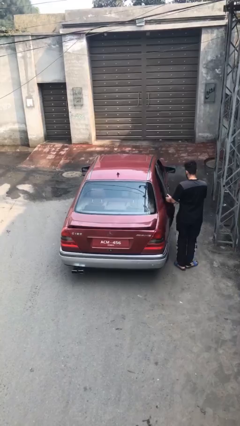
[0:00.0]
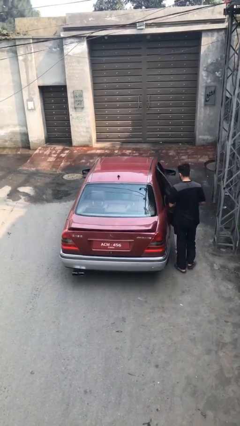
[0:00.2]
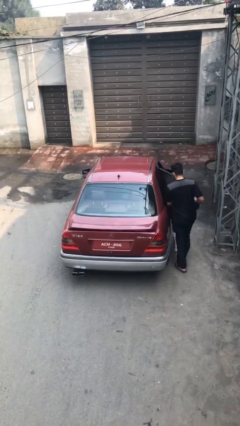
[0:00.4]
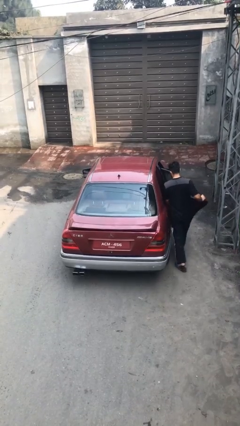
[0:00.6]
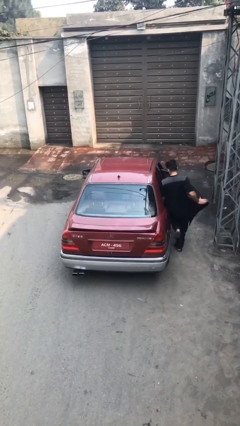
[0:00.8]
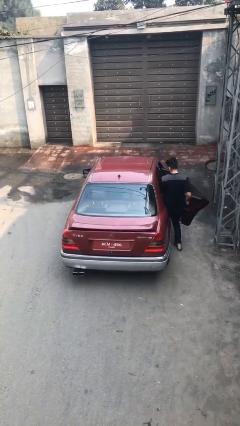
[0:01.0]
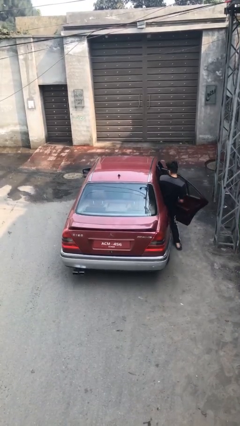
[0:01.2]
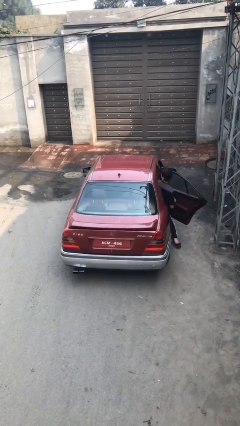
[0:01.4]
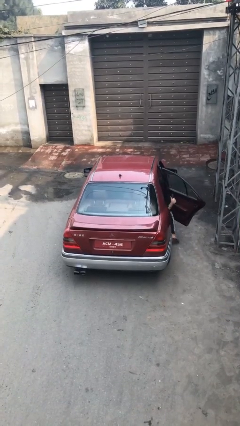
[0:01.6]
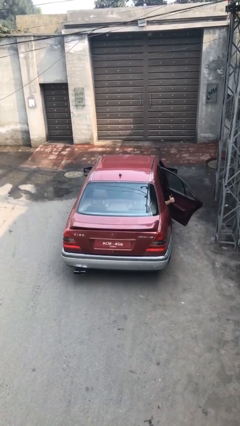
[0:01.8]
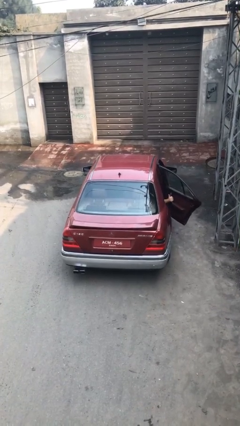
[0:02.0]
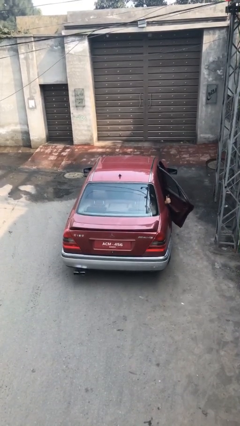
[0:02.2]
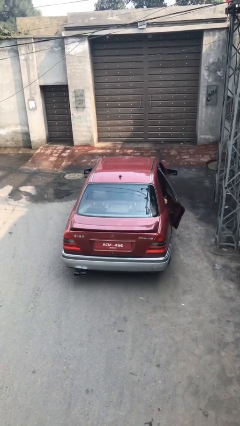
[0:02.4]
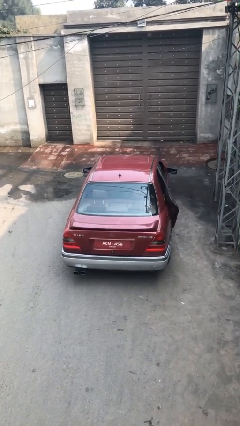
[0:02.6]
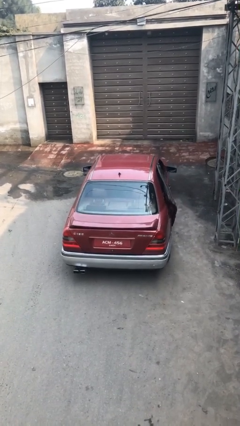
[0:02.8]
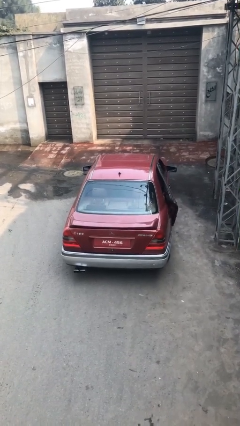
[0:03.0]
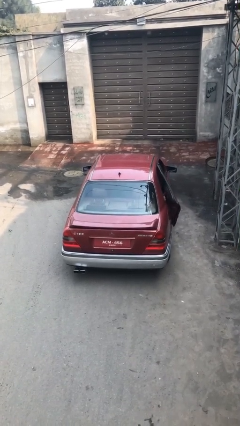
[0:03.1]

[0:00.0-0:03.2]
car picks up person

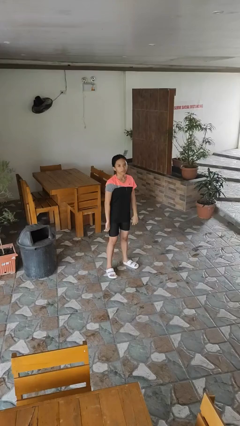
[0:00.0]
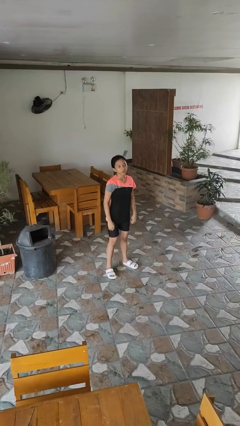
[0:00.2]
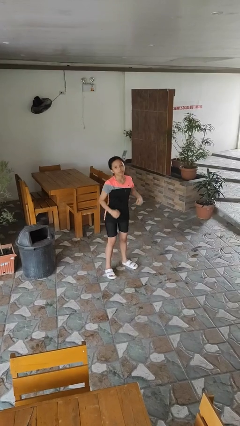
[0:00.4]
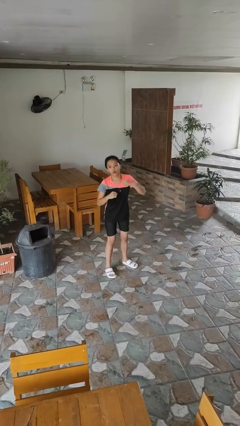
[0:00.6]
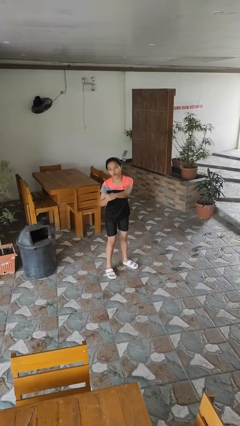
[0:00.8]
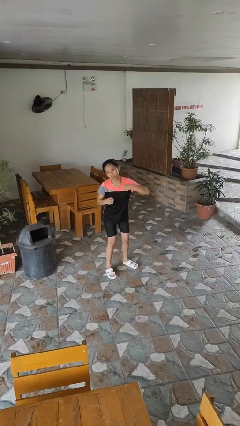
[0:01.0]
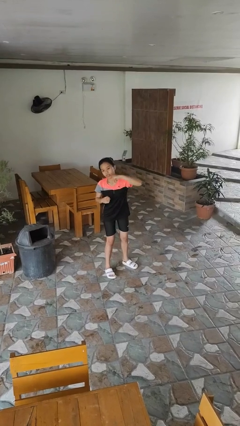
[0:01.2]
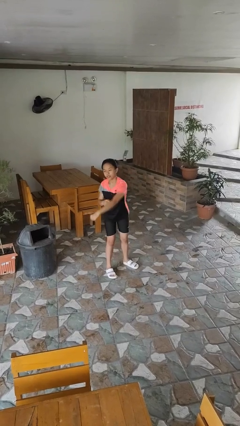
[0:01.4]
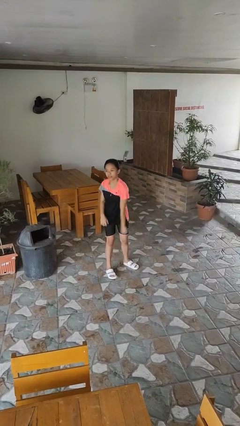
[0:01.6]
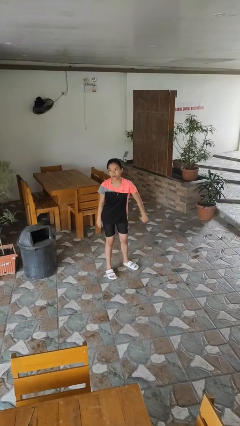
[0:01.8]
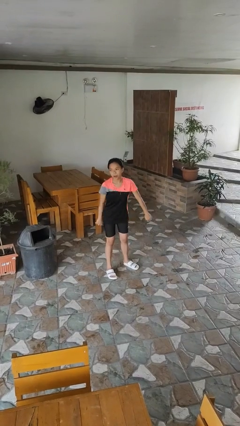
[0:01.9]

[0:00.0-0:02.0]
person punches

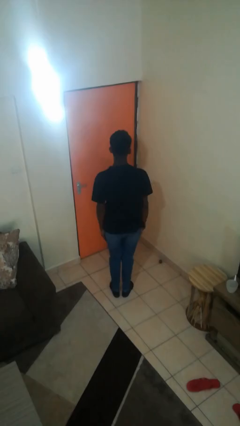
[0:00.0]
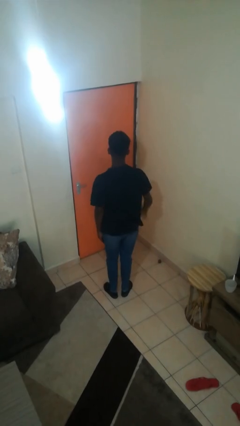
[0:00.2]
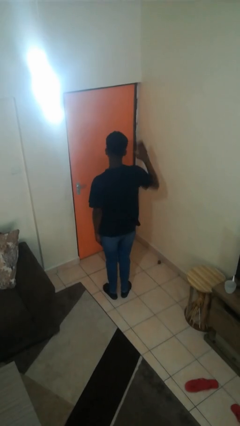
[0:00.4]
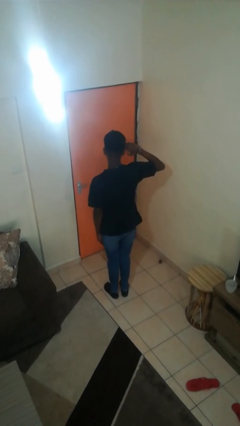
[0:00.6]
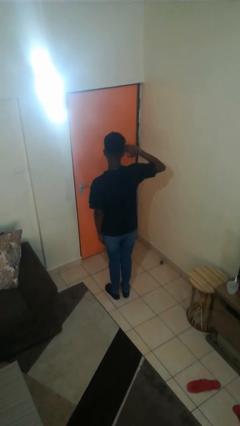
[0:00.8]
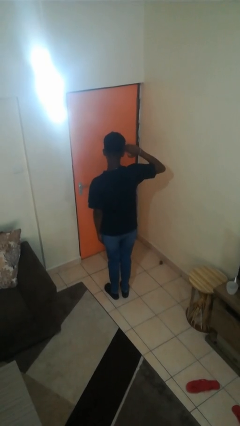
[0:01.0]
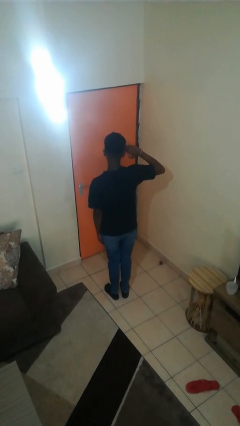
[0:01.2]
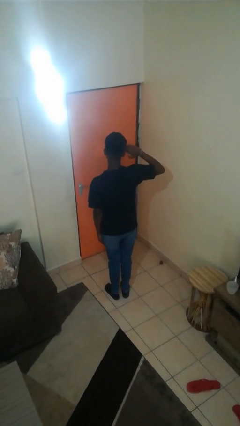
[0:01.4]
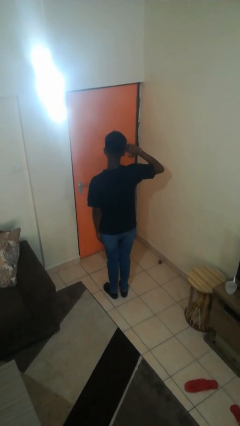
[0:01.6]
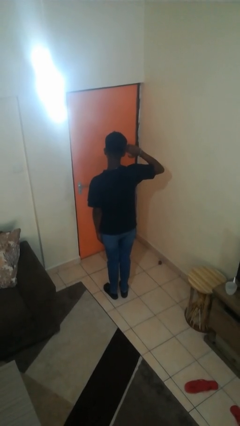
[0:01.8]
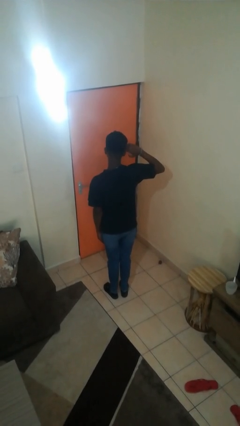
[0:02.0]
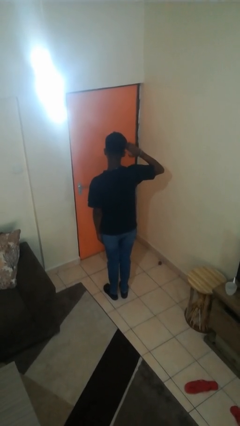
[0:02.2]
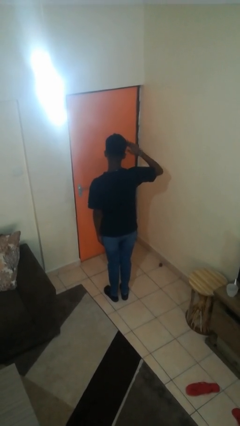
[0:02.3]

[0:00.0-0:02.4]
person salutes

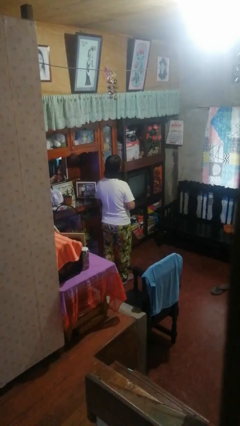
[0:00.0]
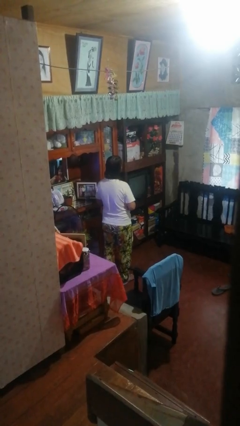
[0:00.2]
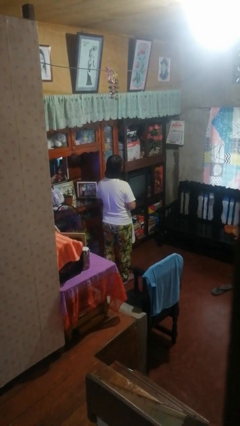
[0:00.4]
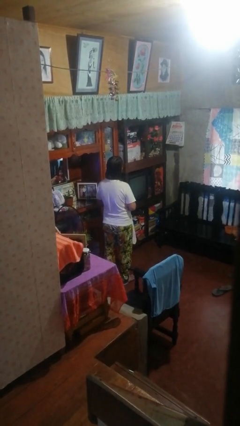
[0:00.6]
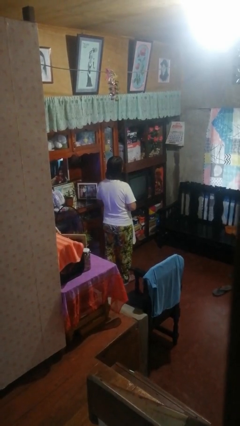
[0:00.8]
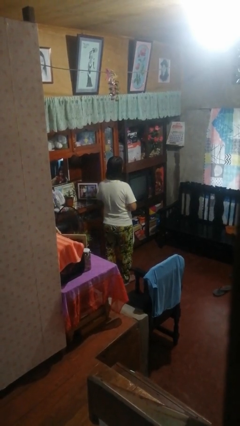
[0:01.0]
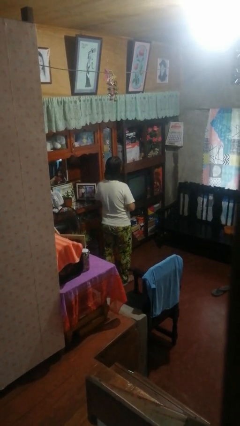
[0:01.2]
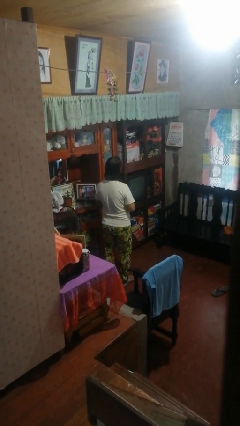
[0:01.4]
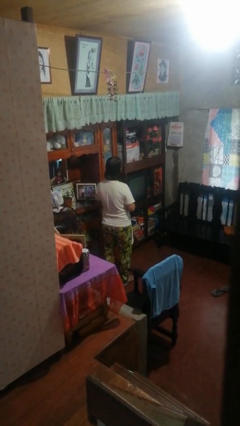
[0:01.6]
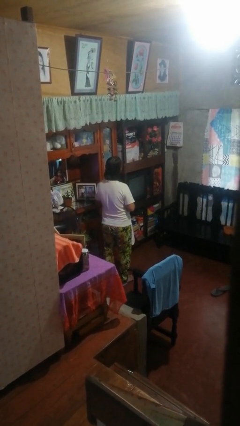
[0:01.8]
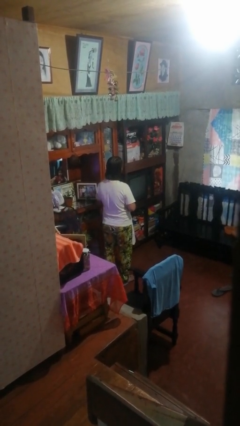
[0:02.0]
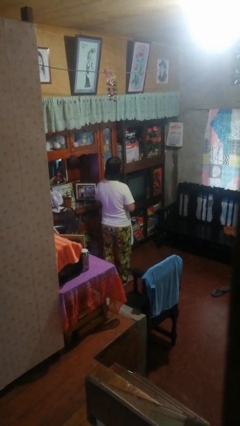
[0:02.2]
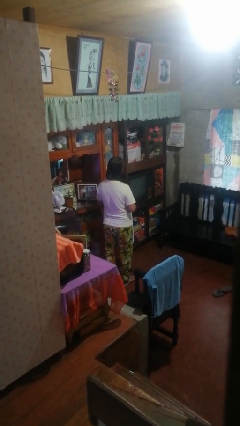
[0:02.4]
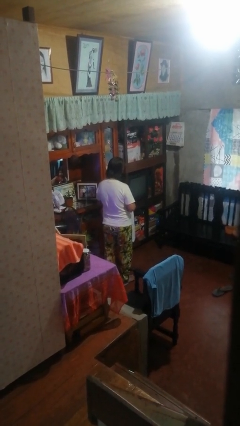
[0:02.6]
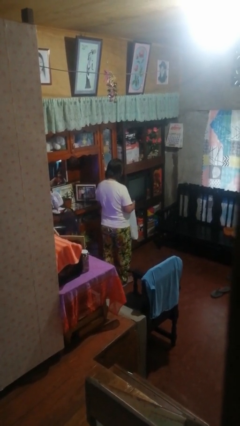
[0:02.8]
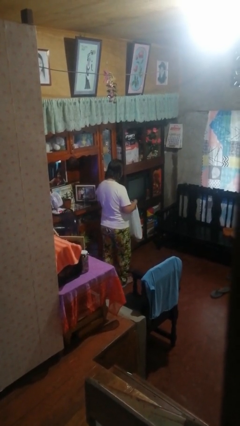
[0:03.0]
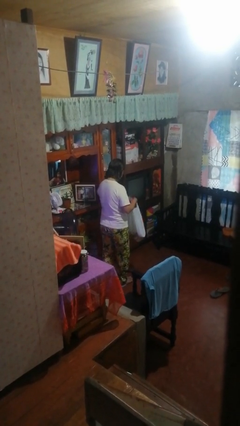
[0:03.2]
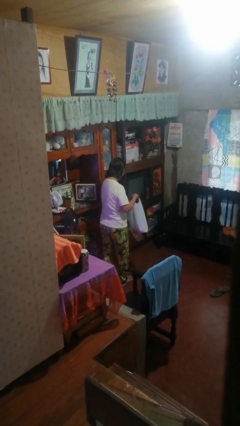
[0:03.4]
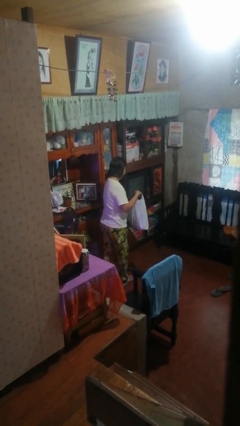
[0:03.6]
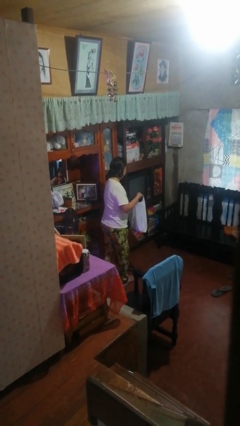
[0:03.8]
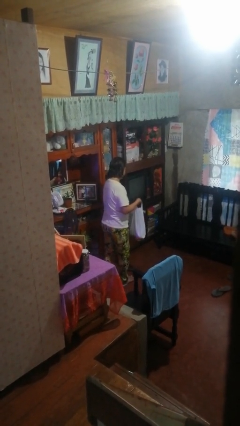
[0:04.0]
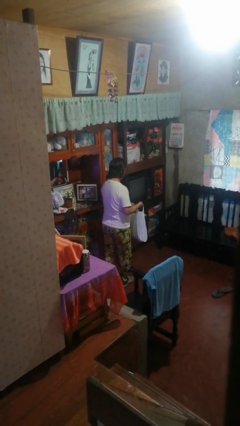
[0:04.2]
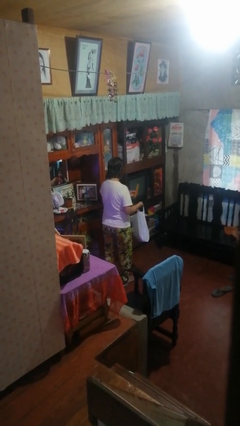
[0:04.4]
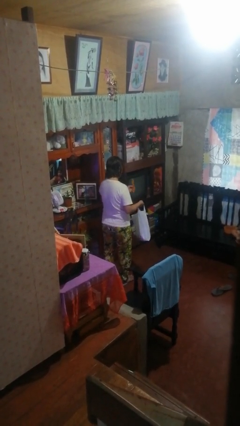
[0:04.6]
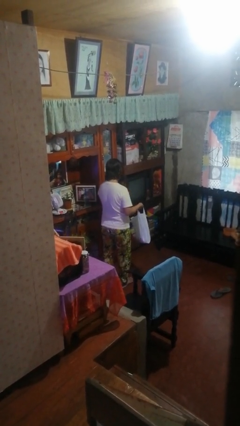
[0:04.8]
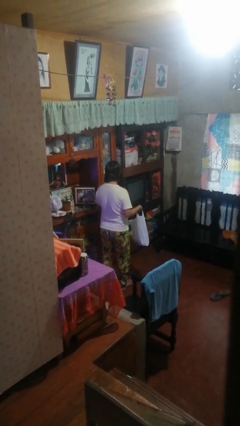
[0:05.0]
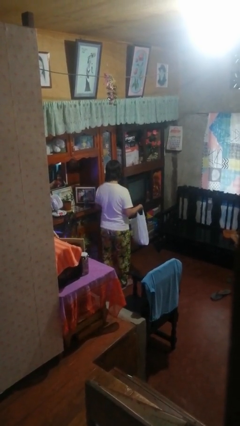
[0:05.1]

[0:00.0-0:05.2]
person takes object from bag

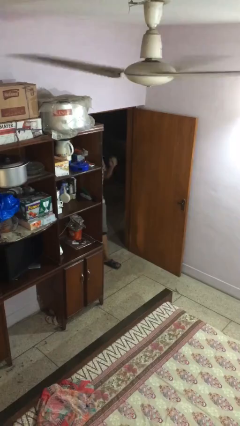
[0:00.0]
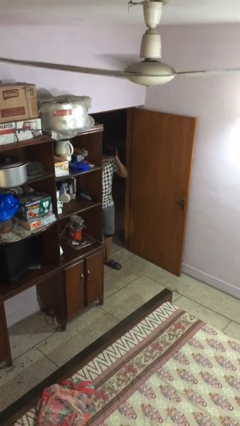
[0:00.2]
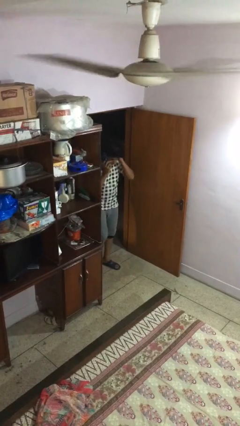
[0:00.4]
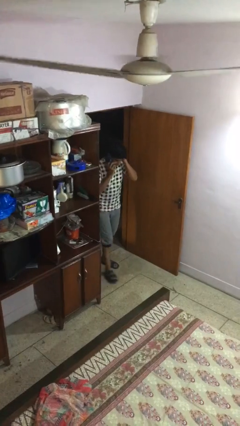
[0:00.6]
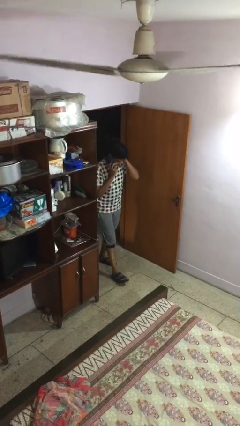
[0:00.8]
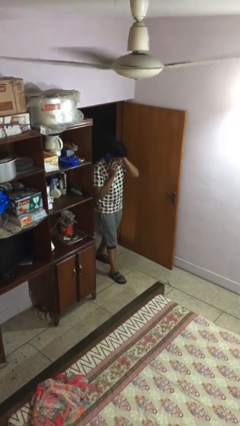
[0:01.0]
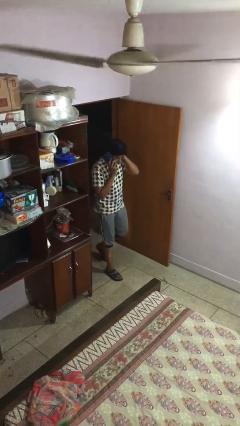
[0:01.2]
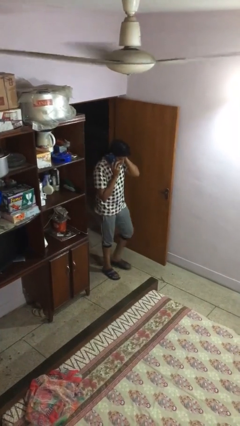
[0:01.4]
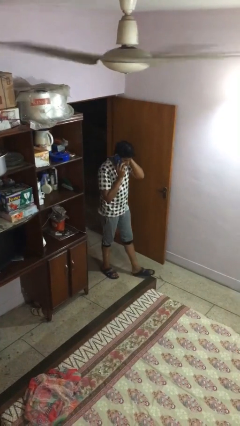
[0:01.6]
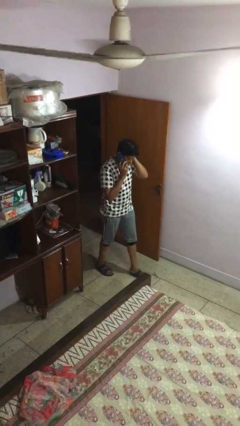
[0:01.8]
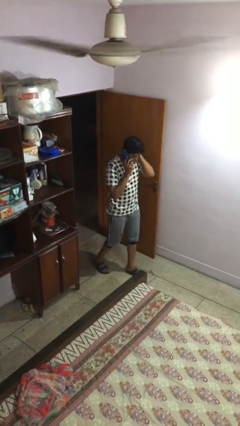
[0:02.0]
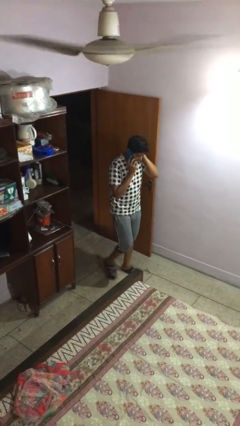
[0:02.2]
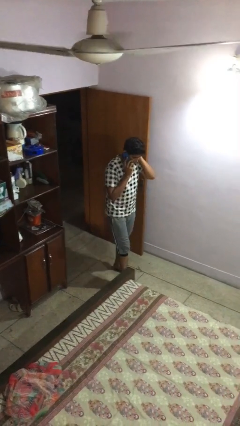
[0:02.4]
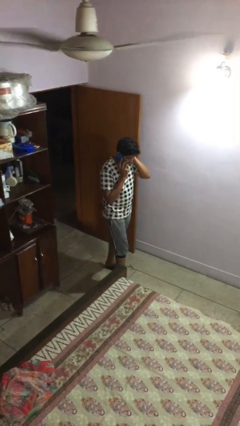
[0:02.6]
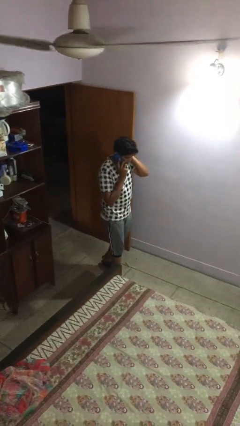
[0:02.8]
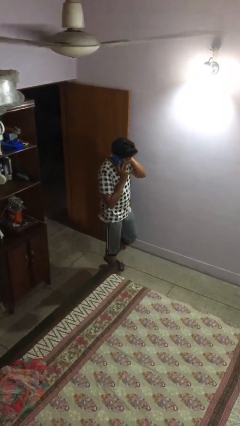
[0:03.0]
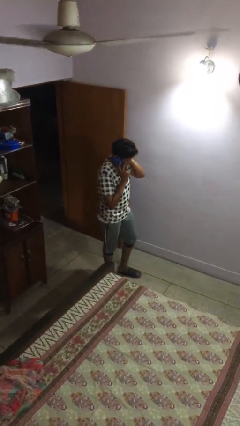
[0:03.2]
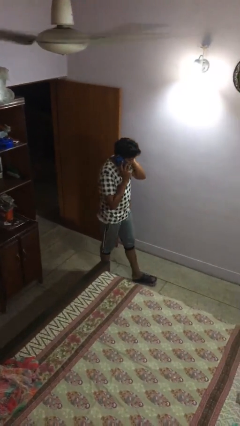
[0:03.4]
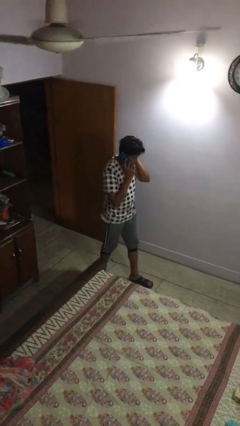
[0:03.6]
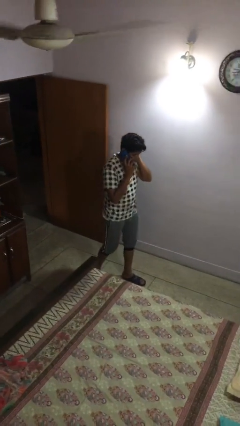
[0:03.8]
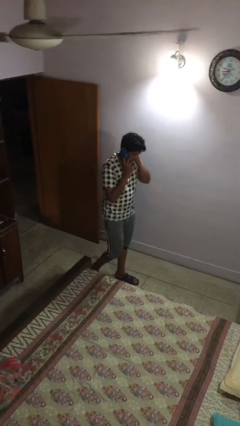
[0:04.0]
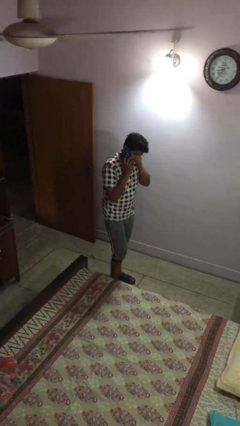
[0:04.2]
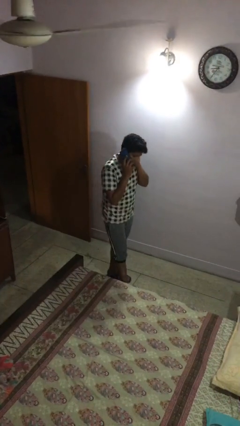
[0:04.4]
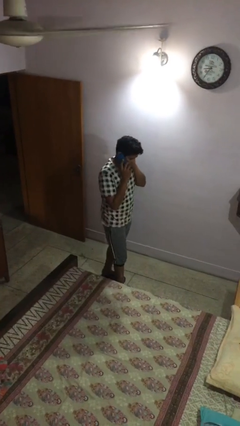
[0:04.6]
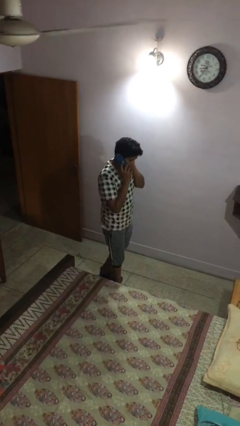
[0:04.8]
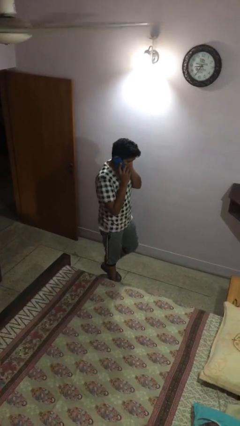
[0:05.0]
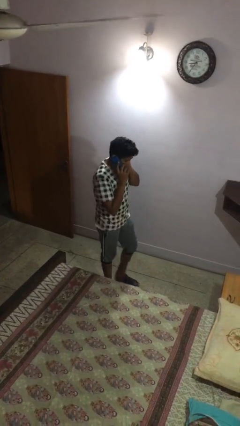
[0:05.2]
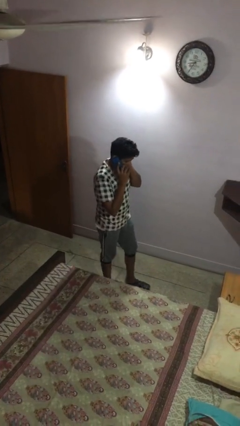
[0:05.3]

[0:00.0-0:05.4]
person enters scene through structure
